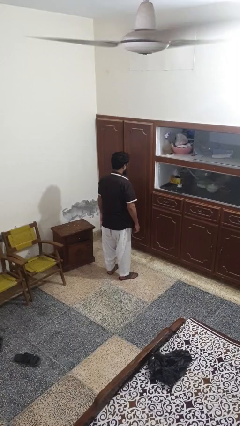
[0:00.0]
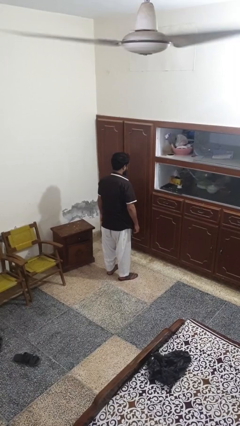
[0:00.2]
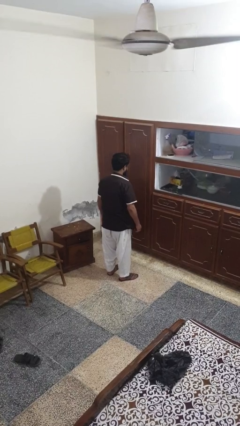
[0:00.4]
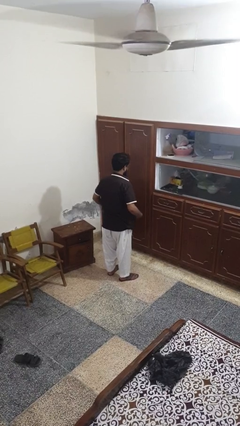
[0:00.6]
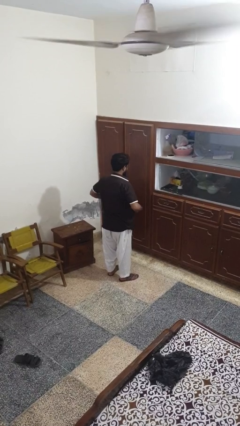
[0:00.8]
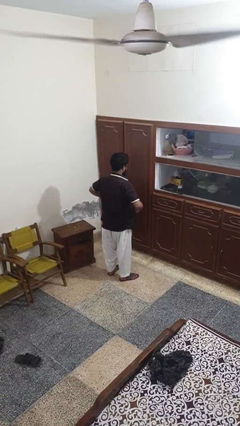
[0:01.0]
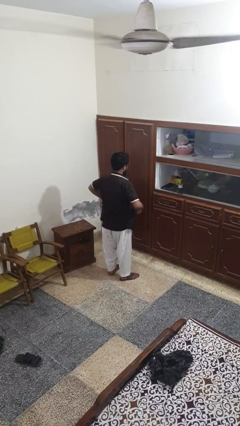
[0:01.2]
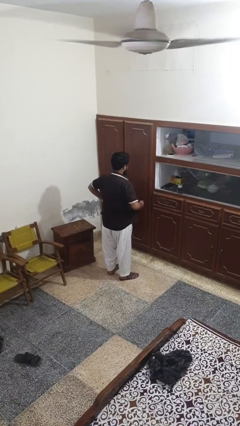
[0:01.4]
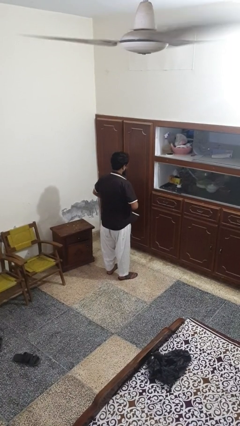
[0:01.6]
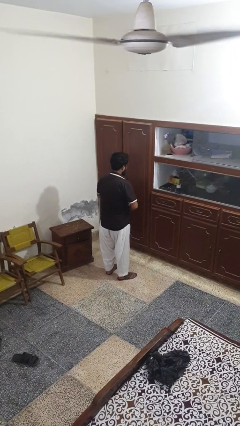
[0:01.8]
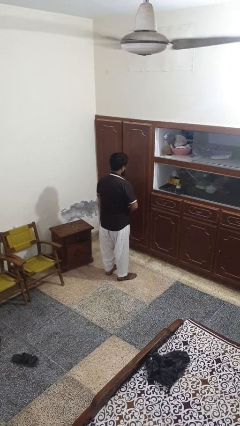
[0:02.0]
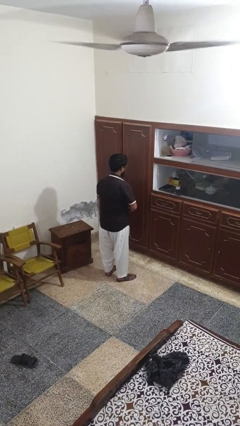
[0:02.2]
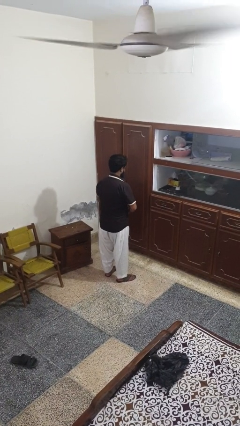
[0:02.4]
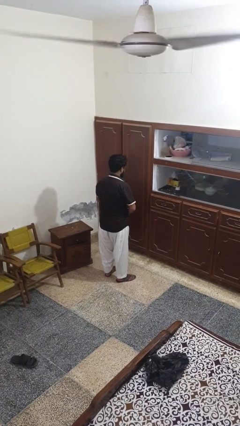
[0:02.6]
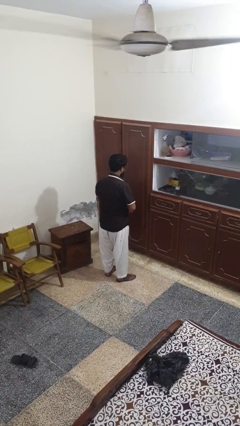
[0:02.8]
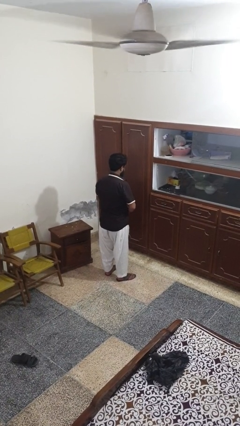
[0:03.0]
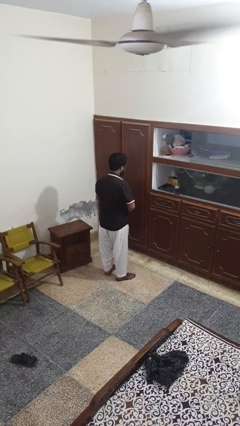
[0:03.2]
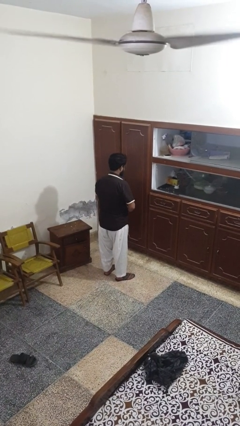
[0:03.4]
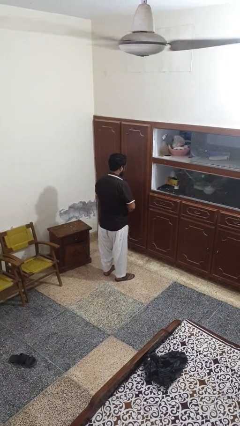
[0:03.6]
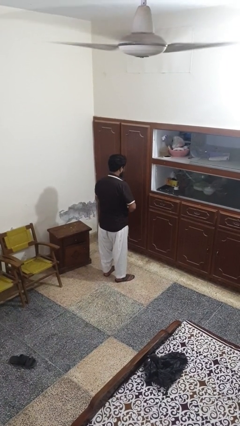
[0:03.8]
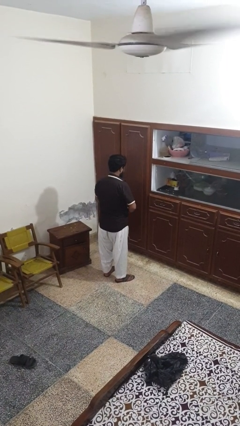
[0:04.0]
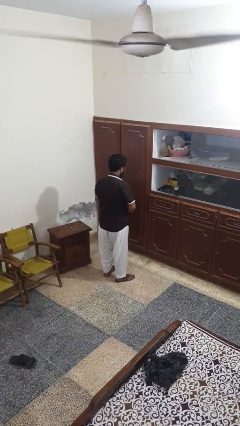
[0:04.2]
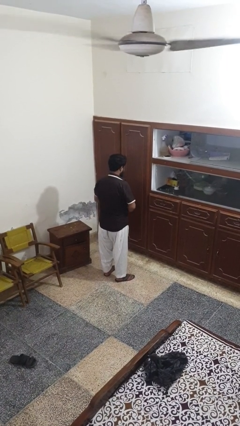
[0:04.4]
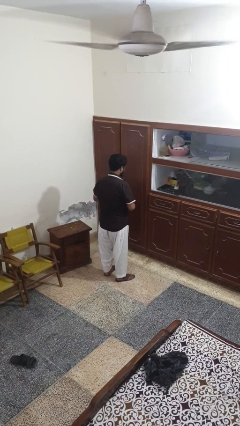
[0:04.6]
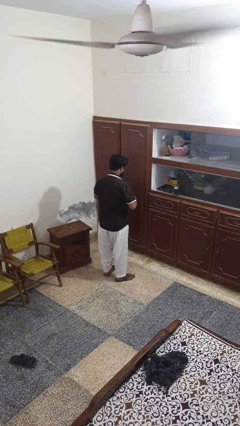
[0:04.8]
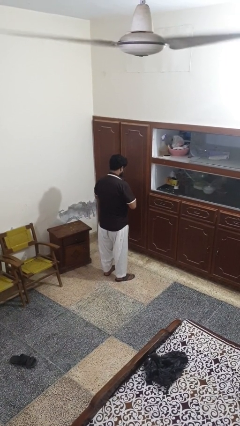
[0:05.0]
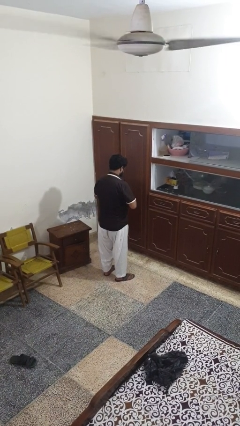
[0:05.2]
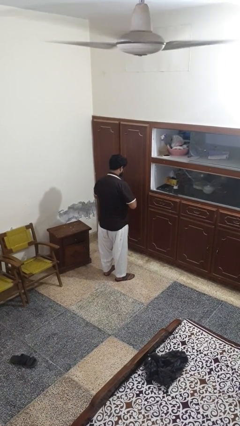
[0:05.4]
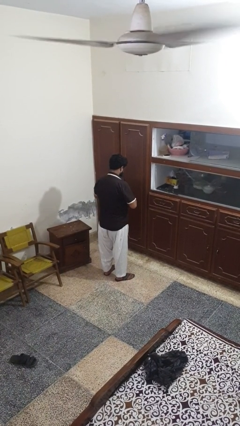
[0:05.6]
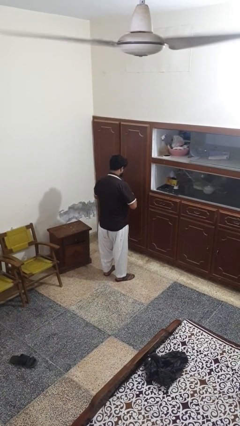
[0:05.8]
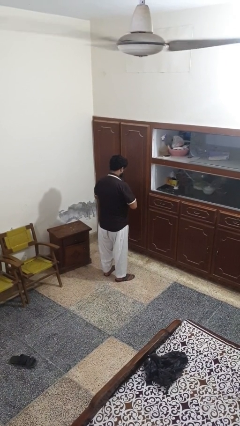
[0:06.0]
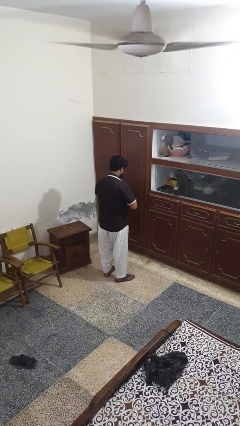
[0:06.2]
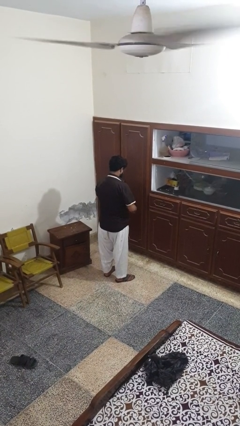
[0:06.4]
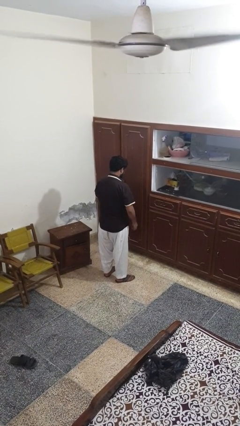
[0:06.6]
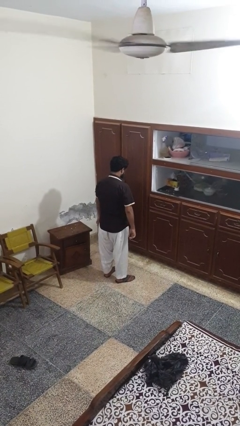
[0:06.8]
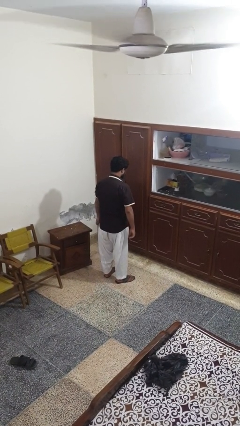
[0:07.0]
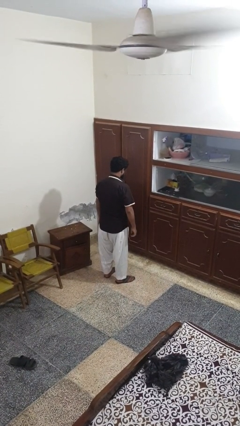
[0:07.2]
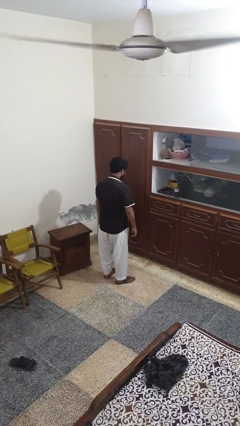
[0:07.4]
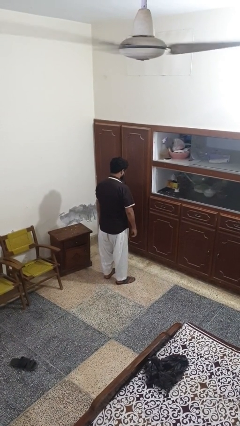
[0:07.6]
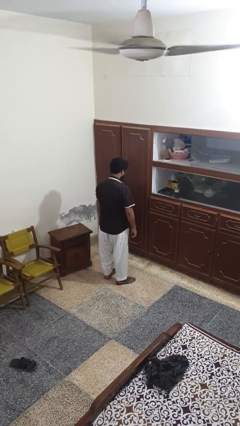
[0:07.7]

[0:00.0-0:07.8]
person buttons shirt

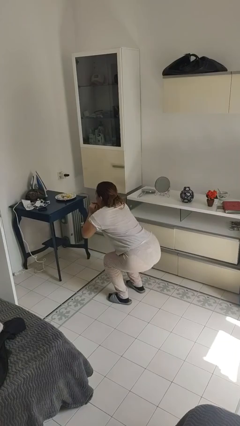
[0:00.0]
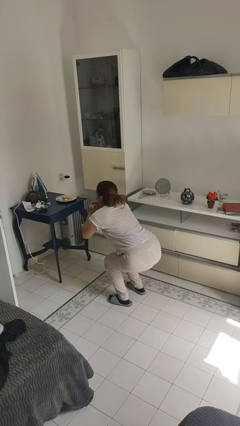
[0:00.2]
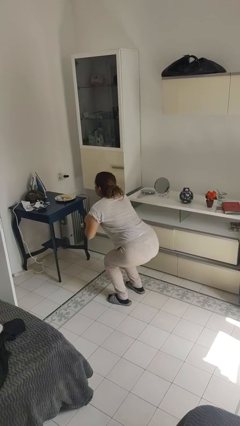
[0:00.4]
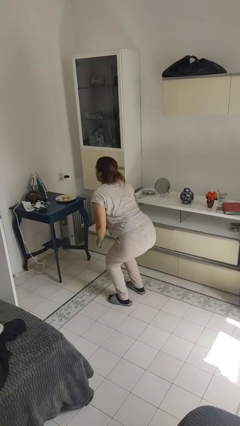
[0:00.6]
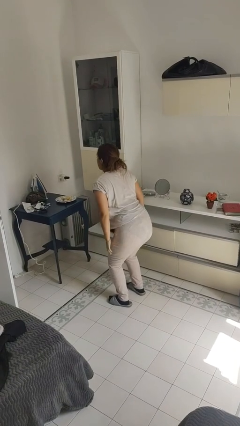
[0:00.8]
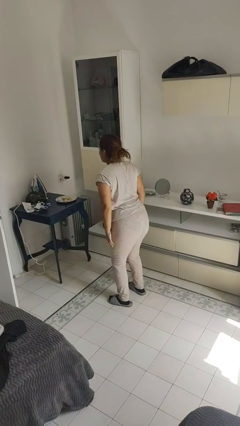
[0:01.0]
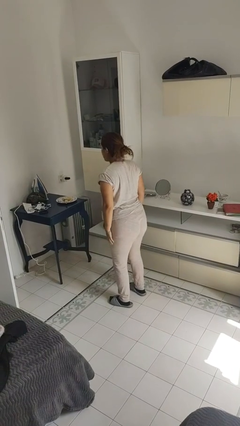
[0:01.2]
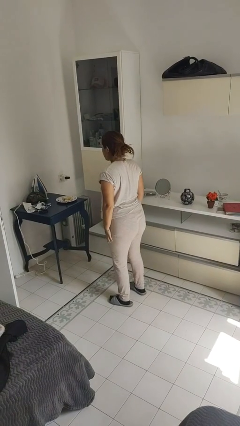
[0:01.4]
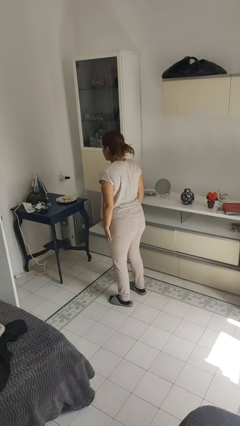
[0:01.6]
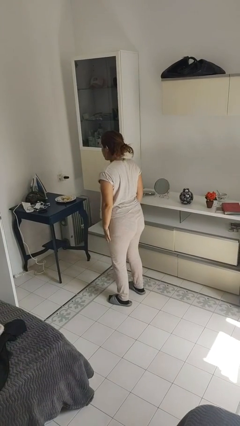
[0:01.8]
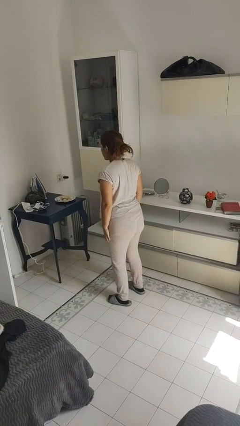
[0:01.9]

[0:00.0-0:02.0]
person stands up

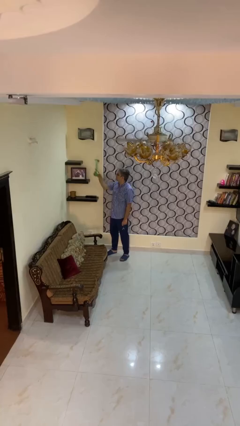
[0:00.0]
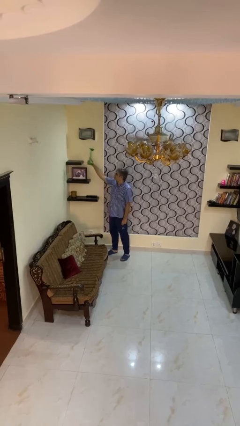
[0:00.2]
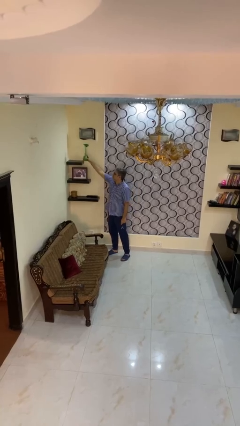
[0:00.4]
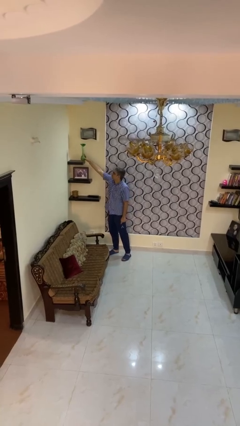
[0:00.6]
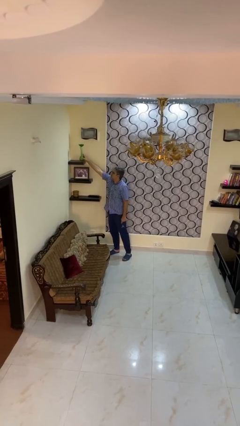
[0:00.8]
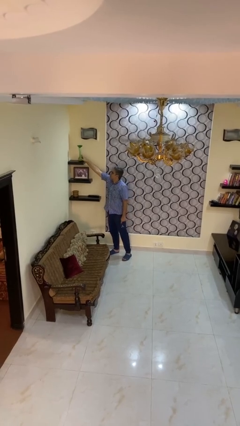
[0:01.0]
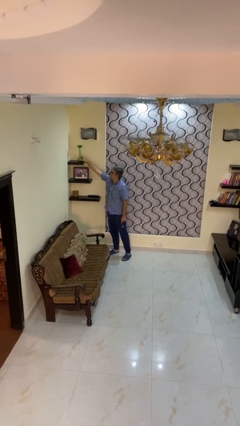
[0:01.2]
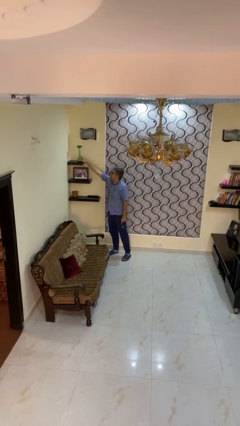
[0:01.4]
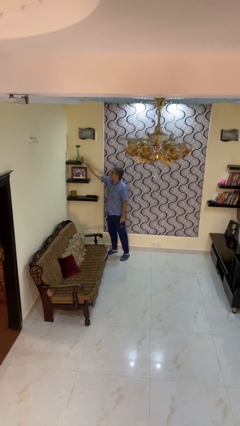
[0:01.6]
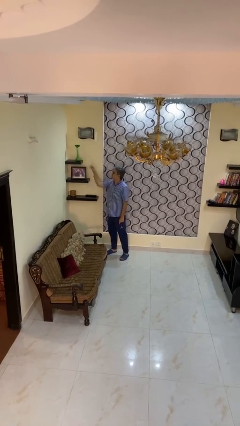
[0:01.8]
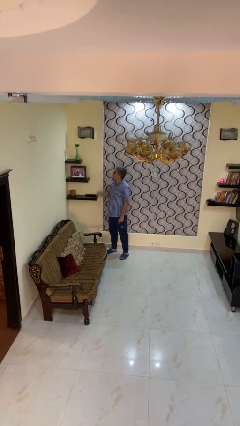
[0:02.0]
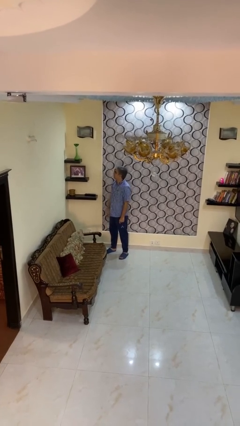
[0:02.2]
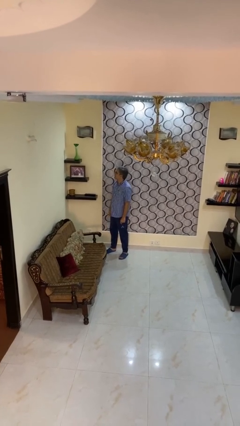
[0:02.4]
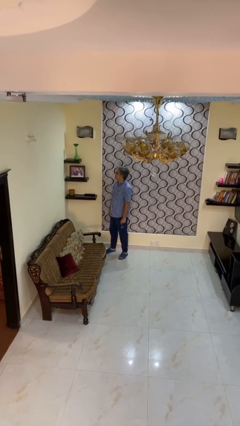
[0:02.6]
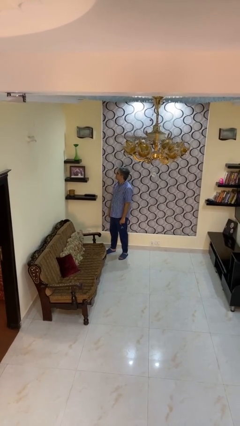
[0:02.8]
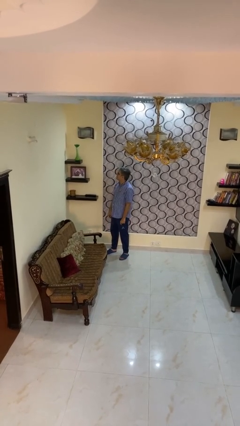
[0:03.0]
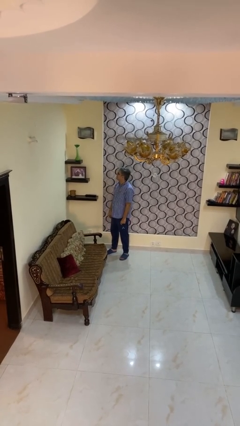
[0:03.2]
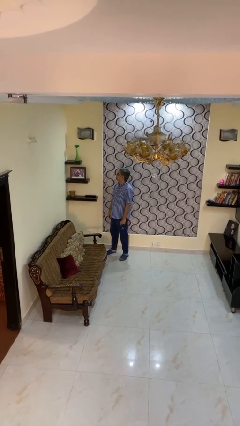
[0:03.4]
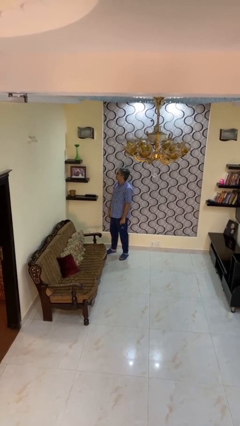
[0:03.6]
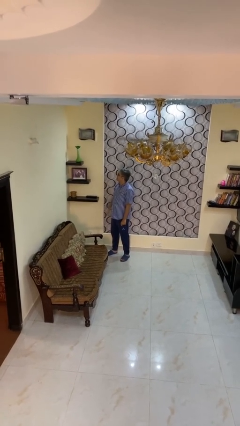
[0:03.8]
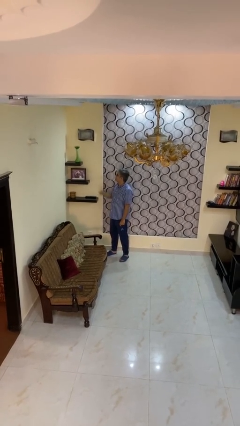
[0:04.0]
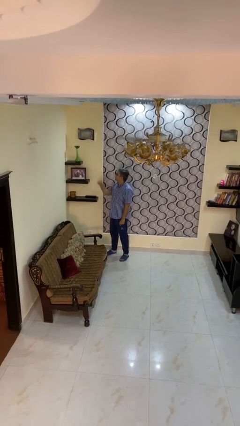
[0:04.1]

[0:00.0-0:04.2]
person puts down object on shelf

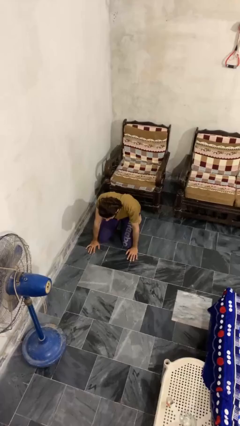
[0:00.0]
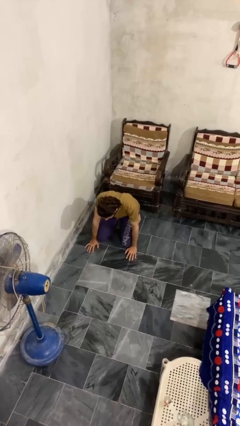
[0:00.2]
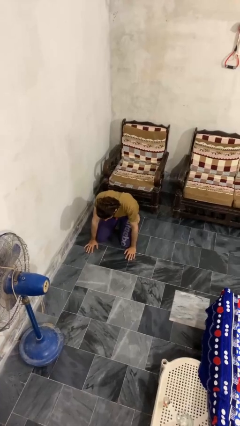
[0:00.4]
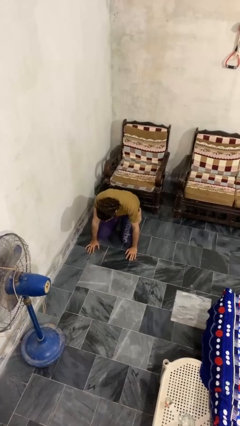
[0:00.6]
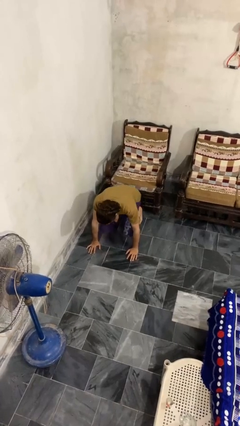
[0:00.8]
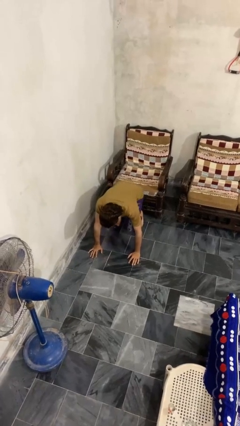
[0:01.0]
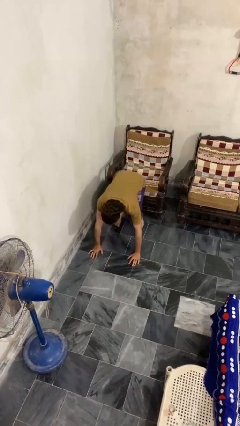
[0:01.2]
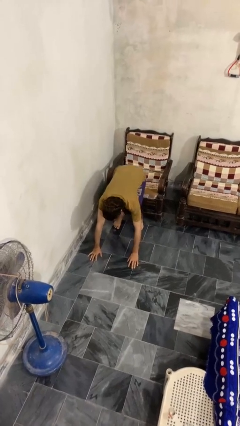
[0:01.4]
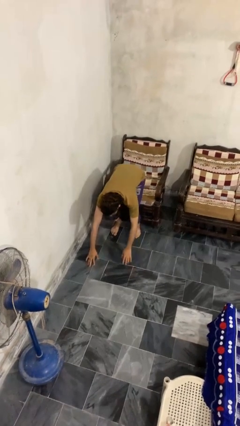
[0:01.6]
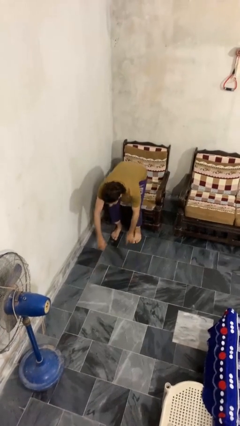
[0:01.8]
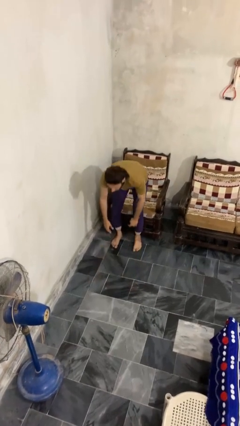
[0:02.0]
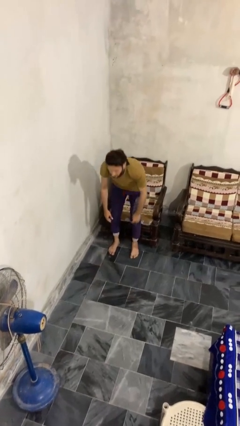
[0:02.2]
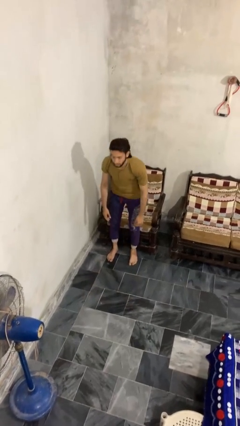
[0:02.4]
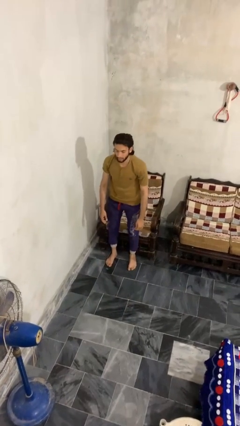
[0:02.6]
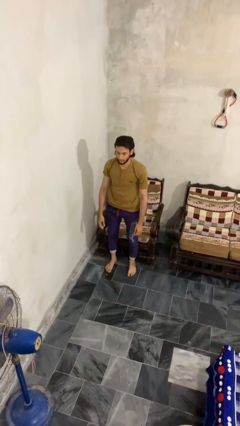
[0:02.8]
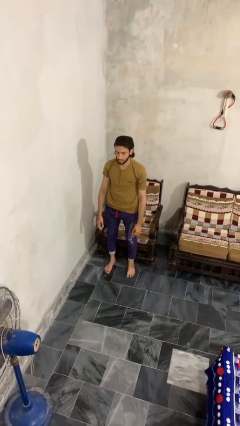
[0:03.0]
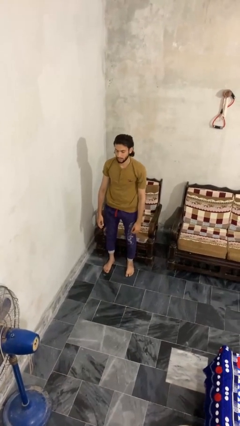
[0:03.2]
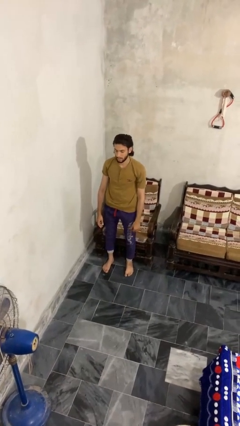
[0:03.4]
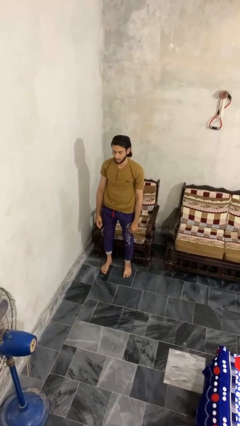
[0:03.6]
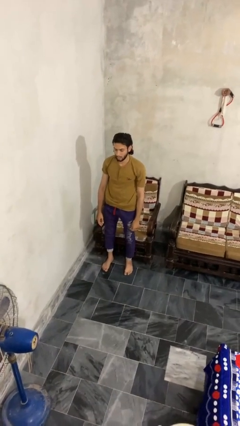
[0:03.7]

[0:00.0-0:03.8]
person stands up from floor
